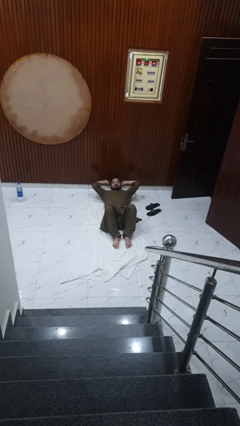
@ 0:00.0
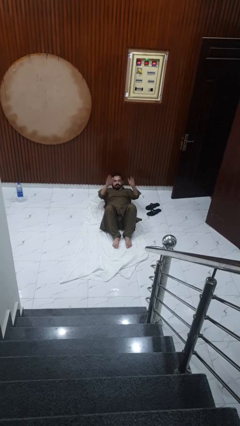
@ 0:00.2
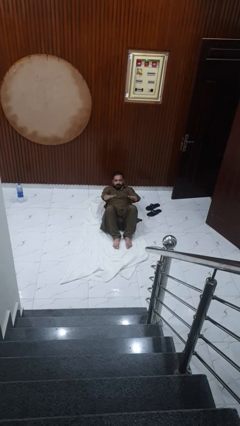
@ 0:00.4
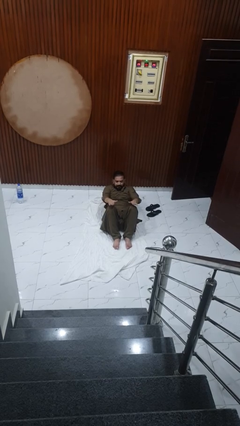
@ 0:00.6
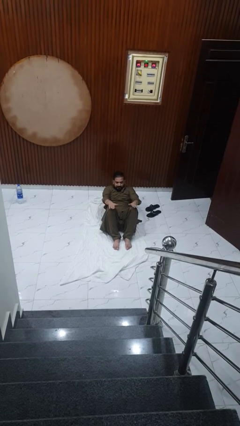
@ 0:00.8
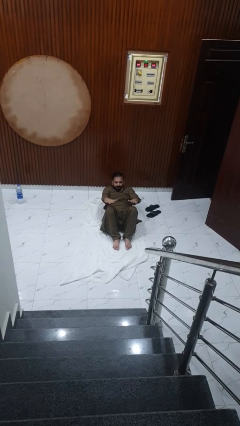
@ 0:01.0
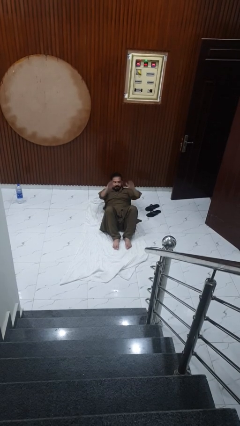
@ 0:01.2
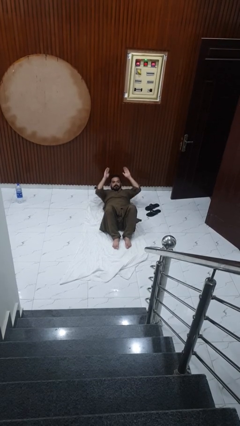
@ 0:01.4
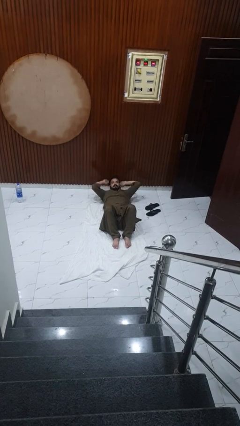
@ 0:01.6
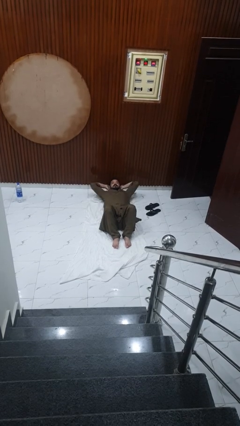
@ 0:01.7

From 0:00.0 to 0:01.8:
person exercises with situp

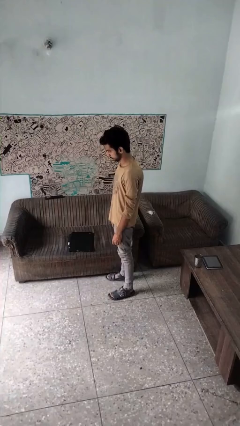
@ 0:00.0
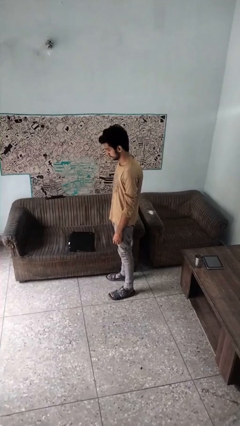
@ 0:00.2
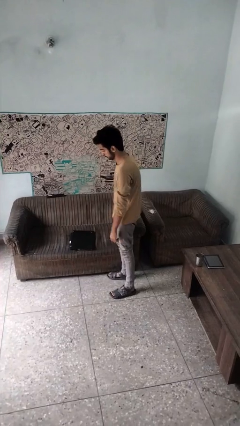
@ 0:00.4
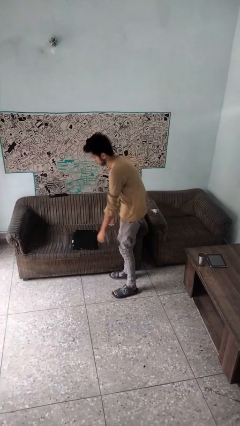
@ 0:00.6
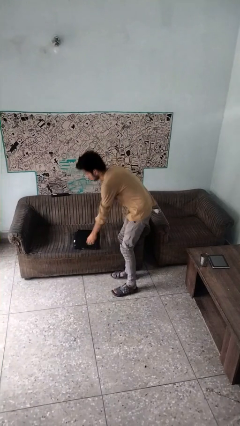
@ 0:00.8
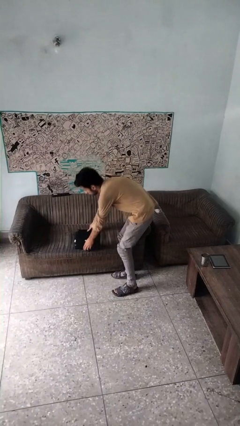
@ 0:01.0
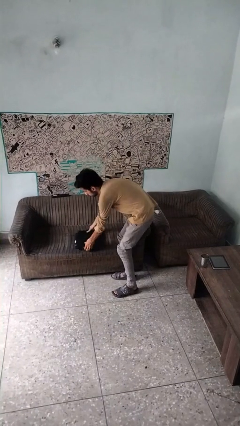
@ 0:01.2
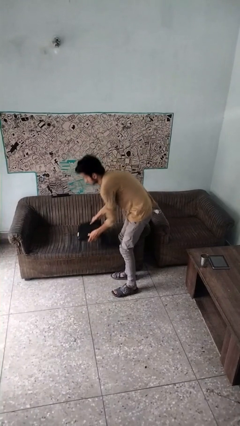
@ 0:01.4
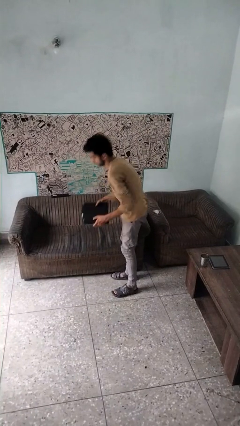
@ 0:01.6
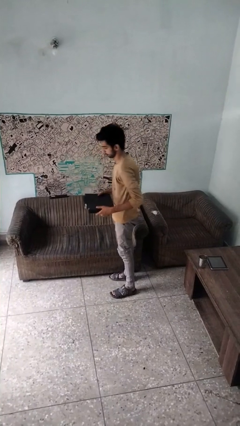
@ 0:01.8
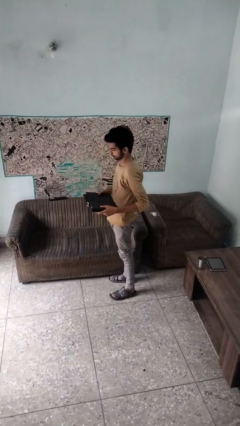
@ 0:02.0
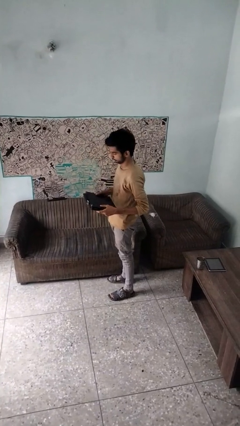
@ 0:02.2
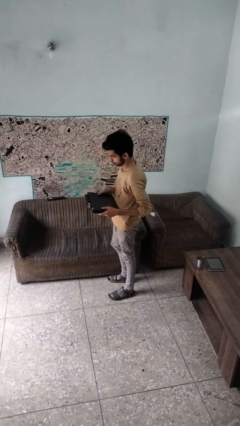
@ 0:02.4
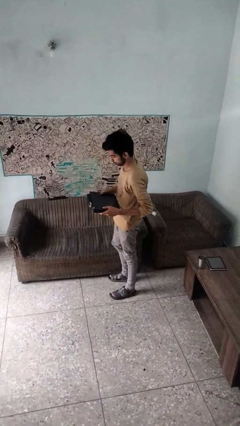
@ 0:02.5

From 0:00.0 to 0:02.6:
person picks up object from couch

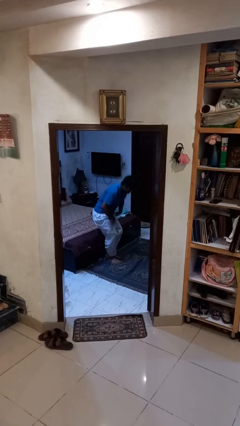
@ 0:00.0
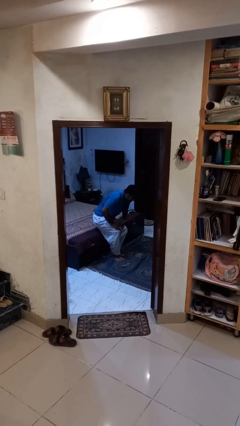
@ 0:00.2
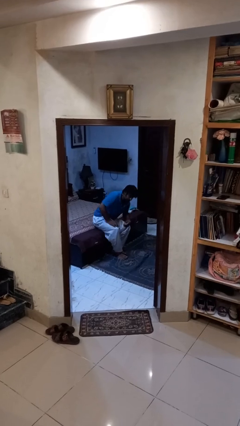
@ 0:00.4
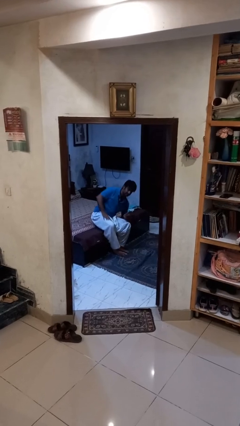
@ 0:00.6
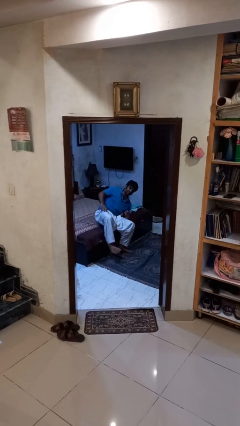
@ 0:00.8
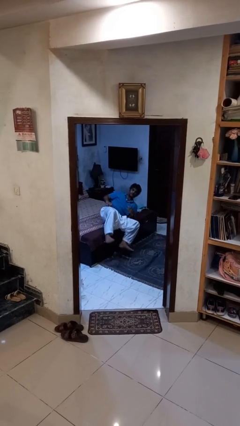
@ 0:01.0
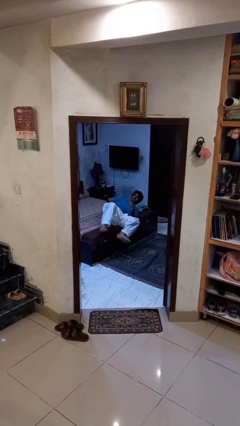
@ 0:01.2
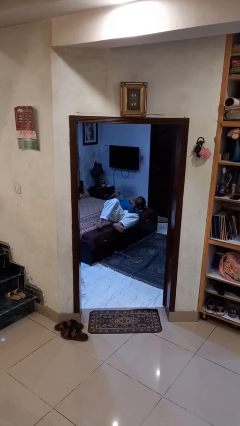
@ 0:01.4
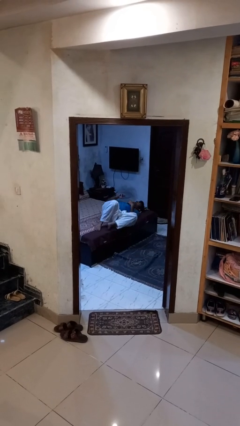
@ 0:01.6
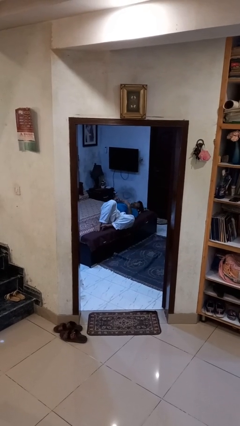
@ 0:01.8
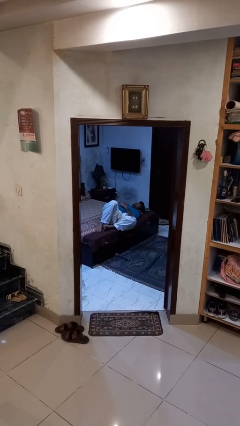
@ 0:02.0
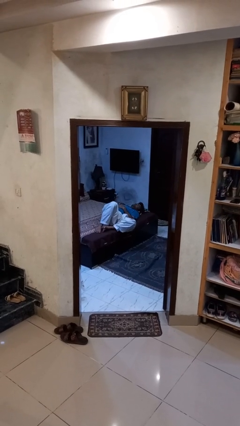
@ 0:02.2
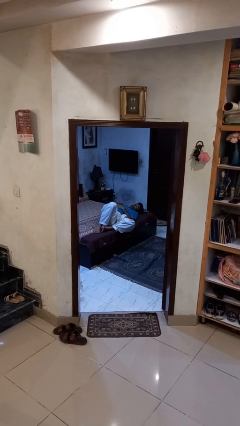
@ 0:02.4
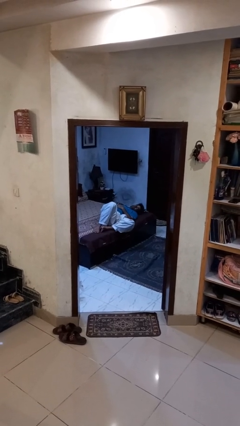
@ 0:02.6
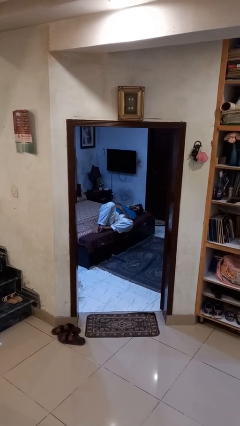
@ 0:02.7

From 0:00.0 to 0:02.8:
person lies down on bed

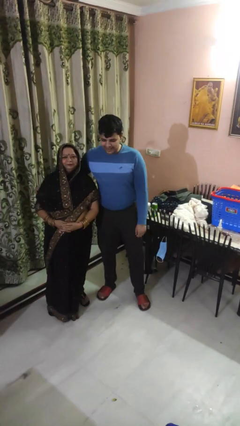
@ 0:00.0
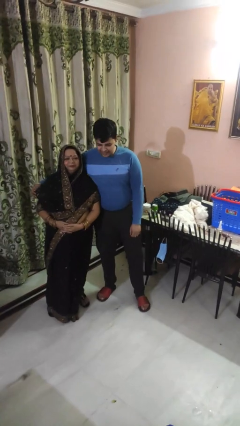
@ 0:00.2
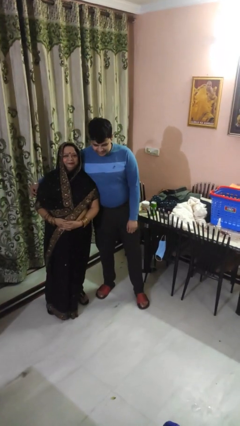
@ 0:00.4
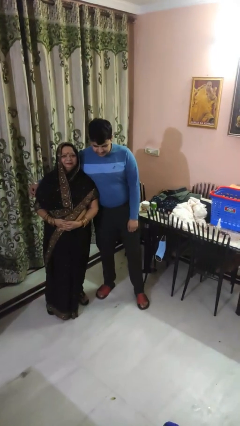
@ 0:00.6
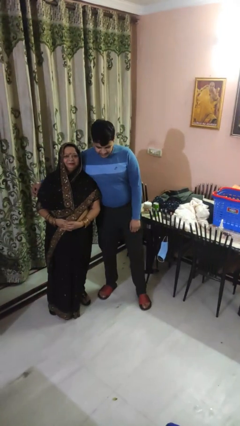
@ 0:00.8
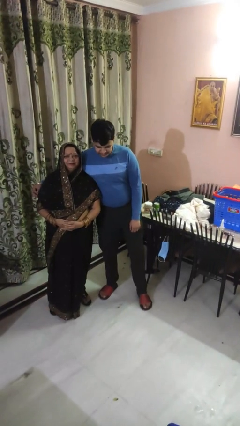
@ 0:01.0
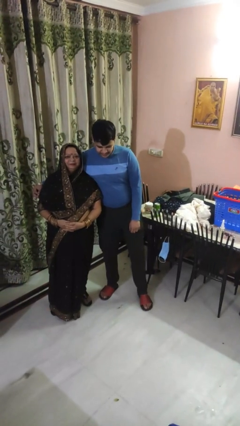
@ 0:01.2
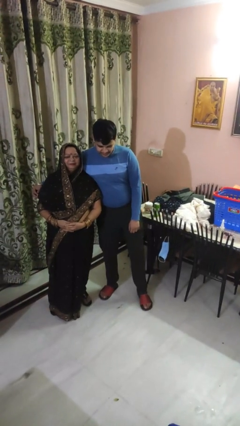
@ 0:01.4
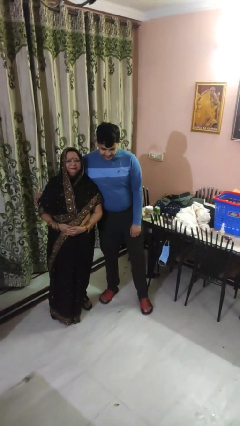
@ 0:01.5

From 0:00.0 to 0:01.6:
person hugs person from side

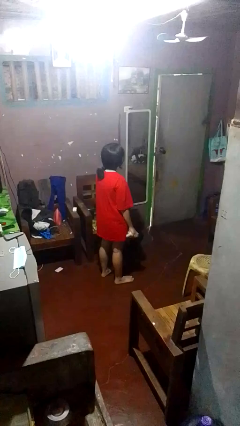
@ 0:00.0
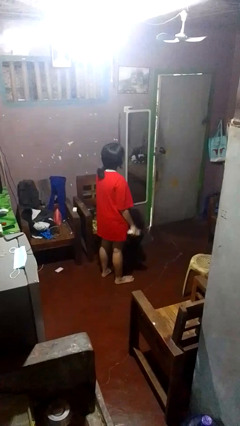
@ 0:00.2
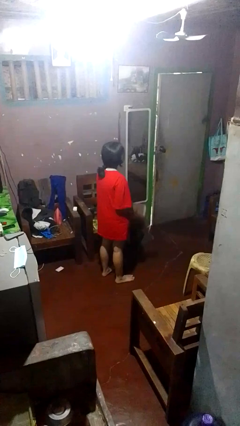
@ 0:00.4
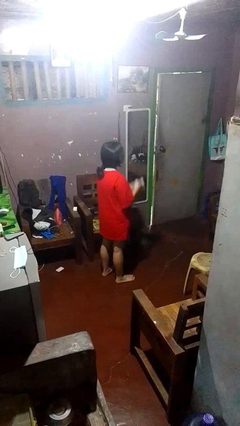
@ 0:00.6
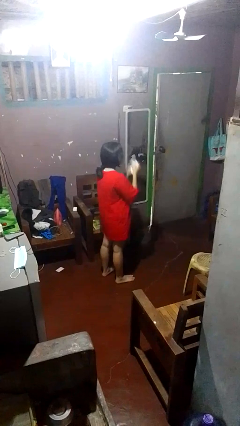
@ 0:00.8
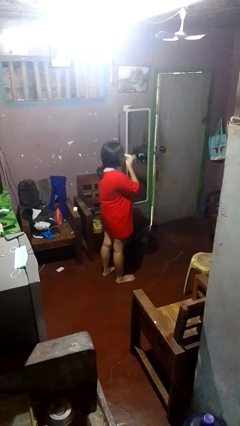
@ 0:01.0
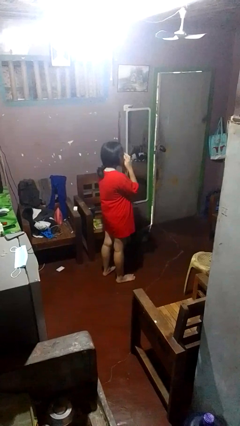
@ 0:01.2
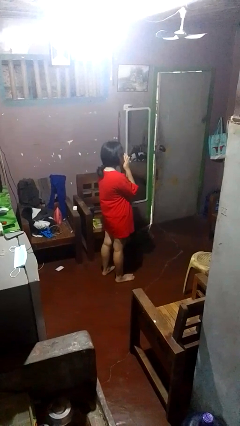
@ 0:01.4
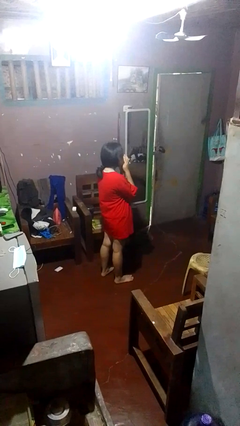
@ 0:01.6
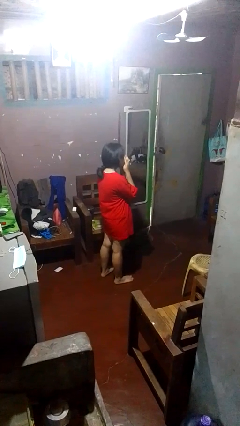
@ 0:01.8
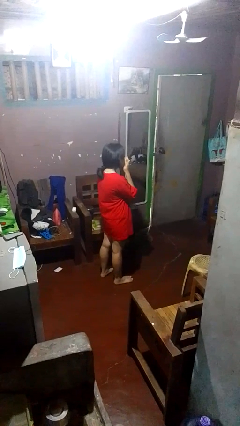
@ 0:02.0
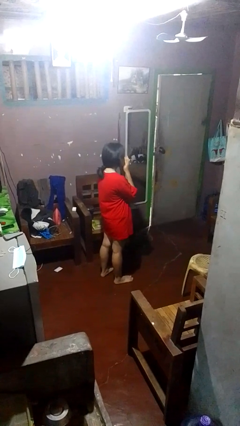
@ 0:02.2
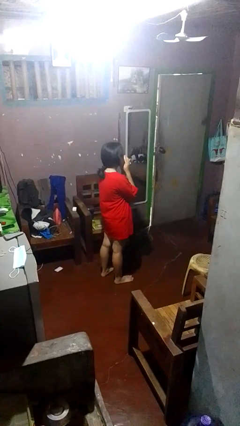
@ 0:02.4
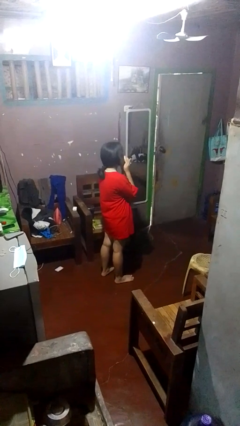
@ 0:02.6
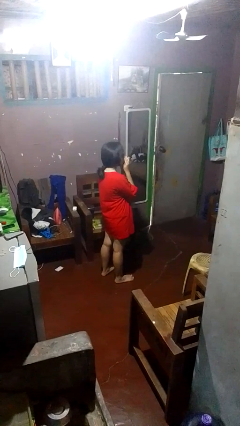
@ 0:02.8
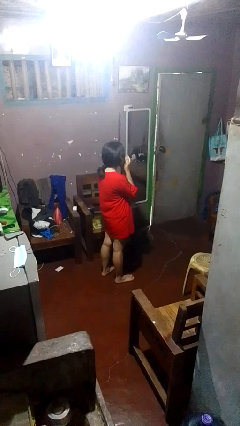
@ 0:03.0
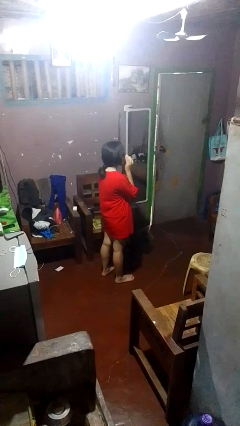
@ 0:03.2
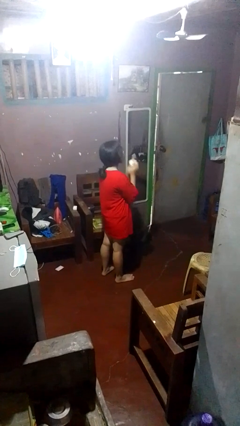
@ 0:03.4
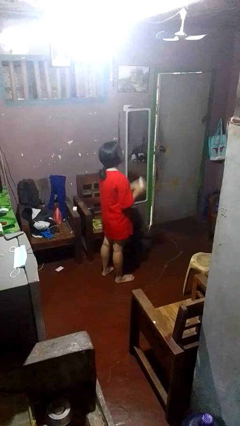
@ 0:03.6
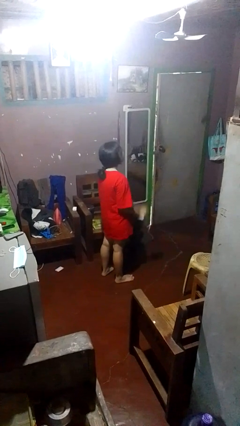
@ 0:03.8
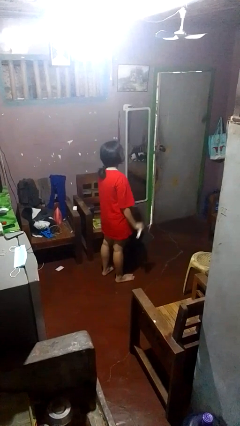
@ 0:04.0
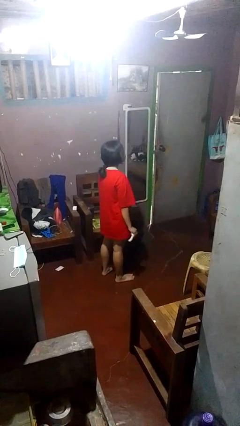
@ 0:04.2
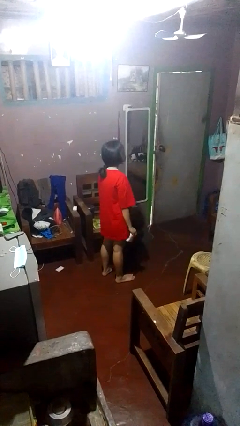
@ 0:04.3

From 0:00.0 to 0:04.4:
person blows nose

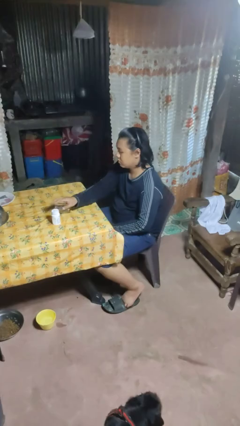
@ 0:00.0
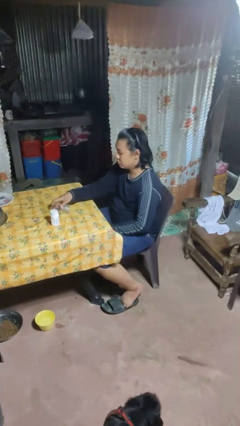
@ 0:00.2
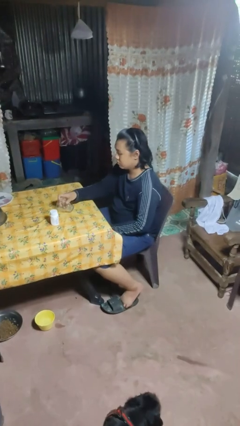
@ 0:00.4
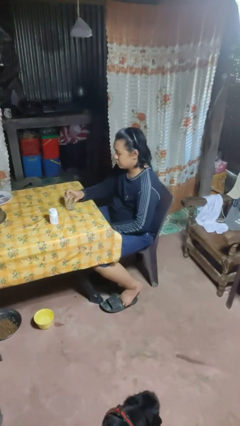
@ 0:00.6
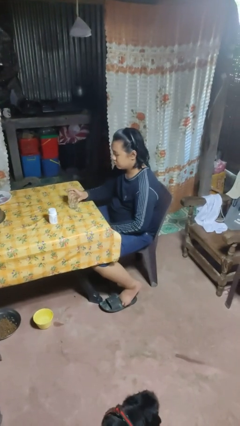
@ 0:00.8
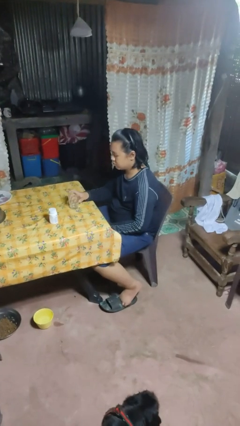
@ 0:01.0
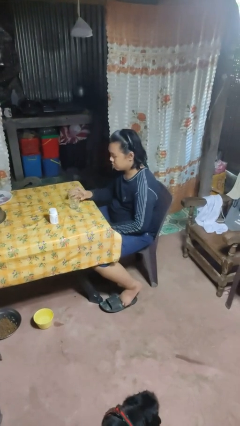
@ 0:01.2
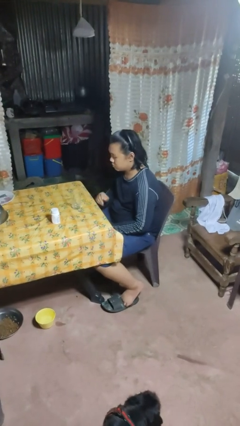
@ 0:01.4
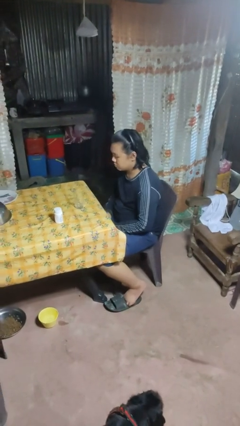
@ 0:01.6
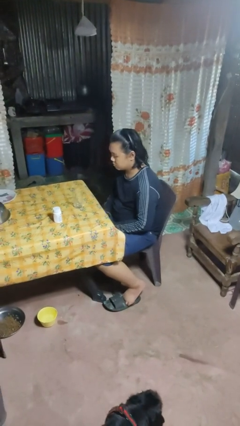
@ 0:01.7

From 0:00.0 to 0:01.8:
person sets upright glass

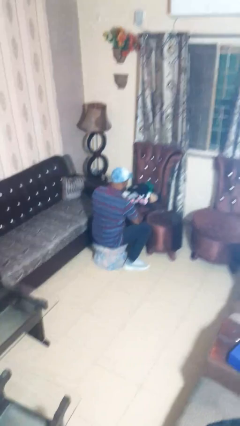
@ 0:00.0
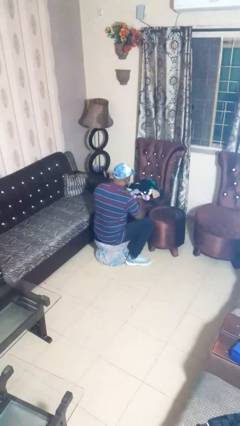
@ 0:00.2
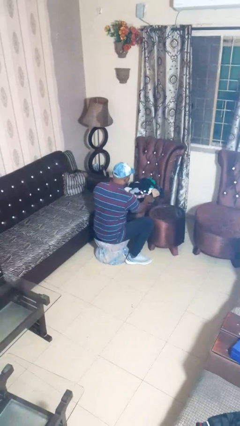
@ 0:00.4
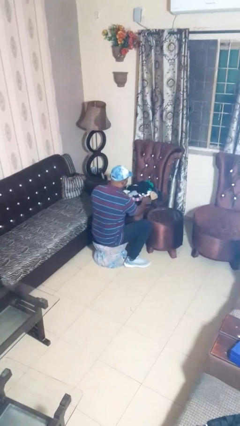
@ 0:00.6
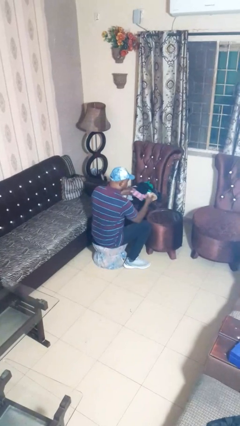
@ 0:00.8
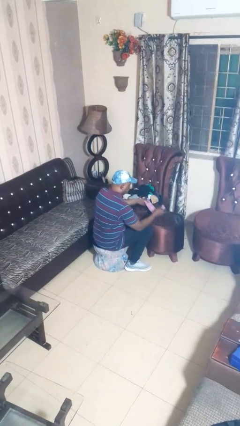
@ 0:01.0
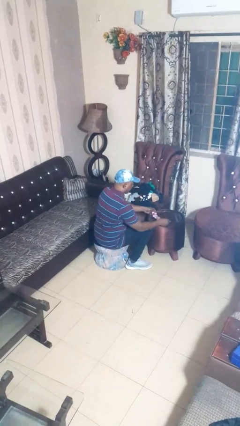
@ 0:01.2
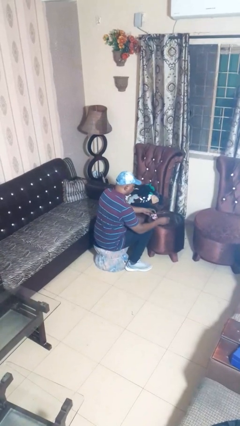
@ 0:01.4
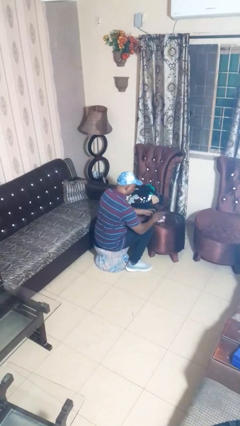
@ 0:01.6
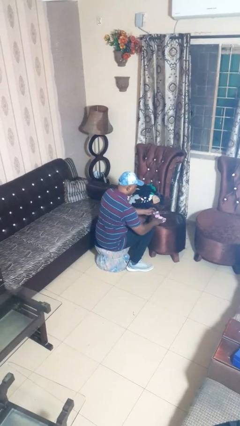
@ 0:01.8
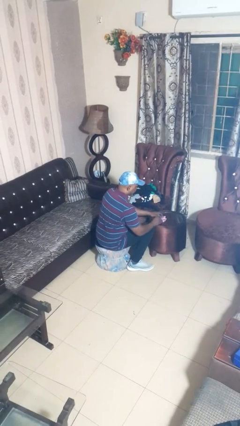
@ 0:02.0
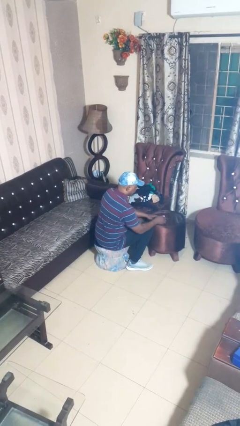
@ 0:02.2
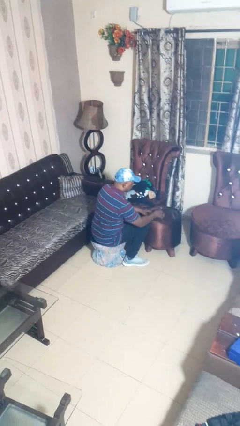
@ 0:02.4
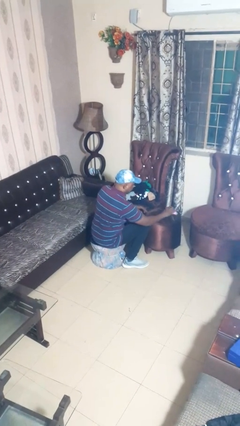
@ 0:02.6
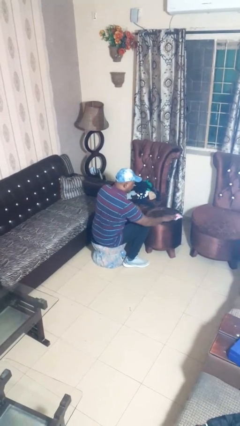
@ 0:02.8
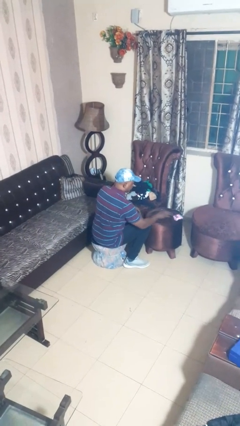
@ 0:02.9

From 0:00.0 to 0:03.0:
person folds socks
